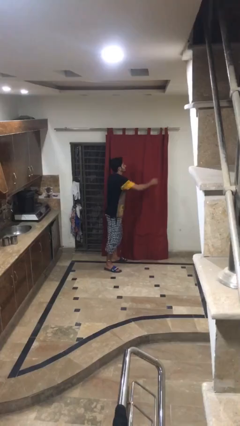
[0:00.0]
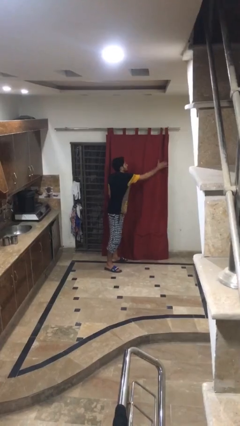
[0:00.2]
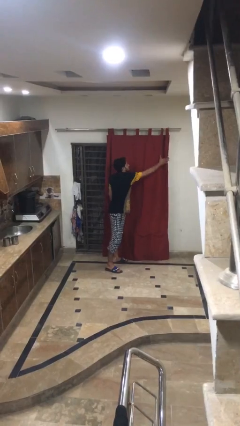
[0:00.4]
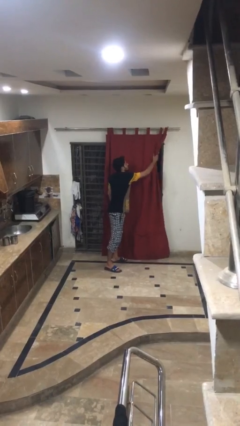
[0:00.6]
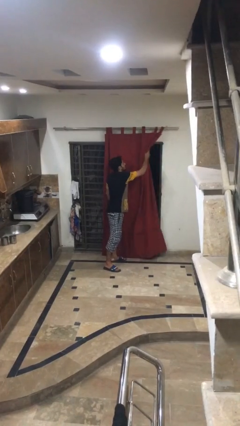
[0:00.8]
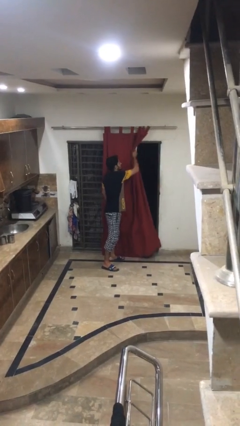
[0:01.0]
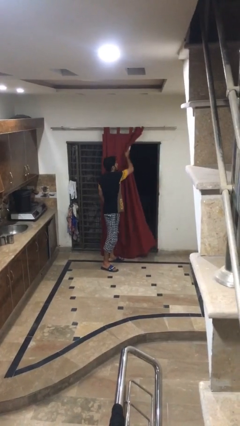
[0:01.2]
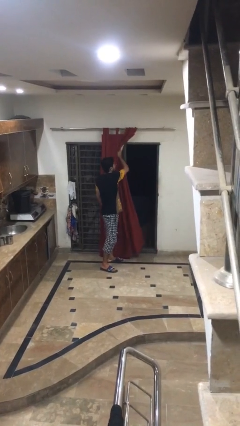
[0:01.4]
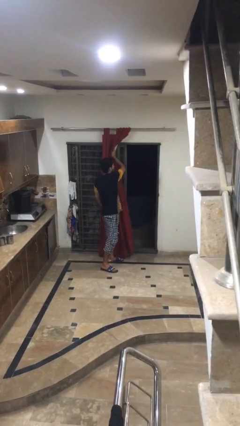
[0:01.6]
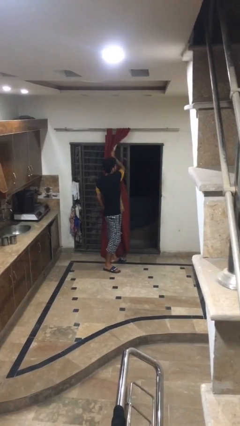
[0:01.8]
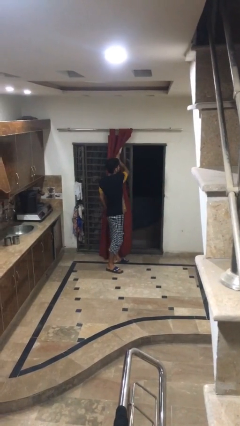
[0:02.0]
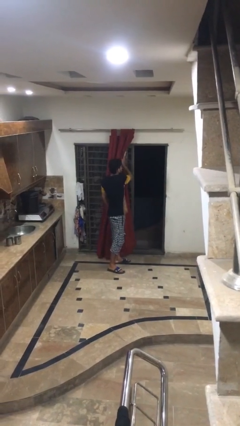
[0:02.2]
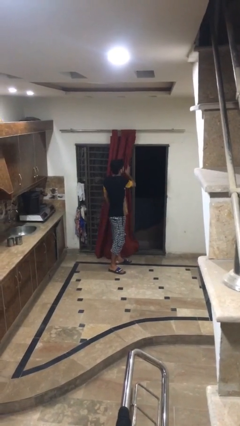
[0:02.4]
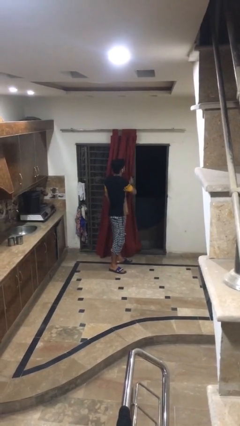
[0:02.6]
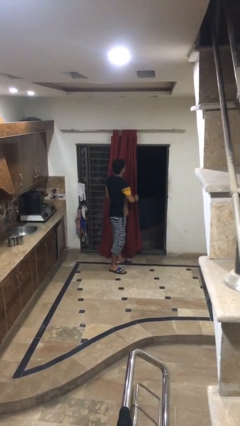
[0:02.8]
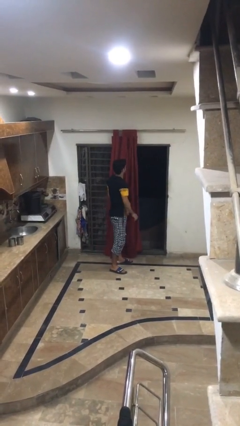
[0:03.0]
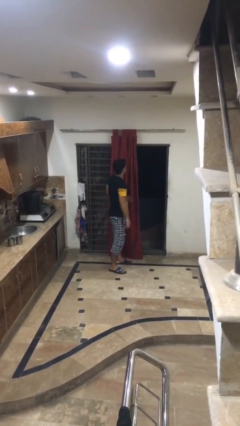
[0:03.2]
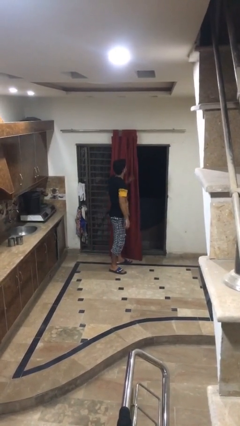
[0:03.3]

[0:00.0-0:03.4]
person opens curtains

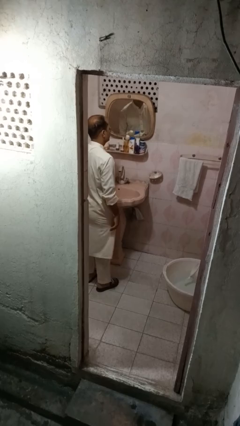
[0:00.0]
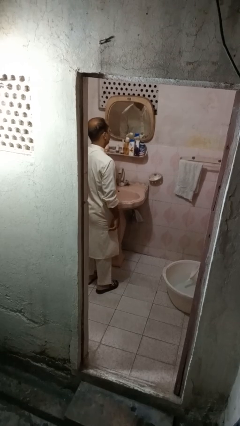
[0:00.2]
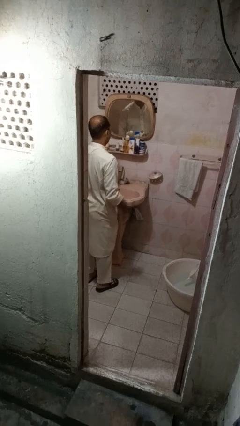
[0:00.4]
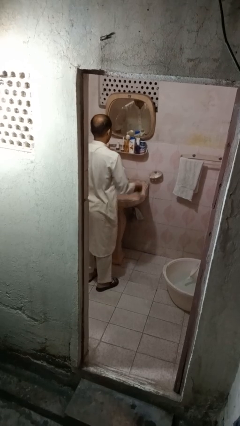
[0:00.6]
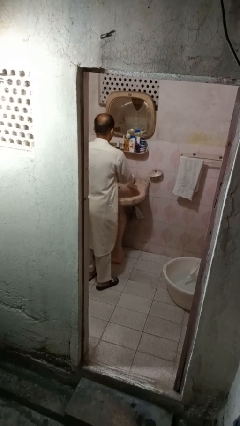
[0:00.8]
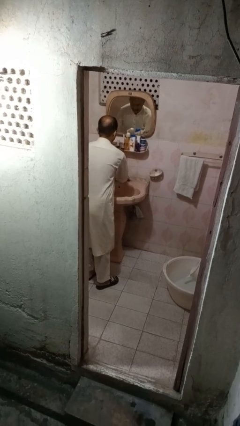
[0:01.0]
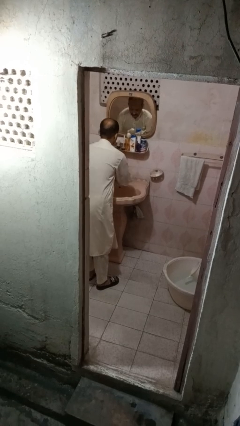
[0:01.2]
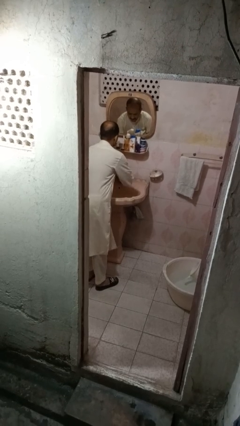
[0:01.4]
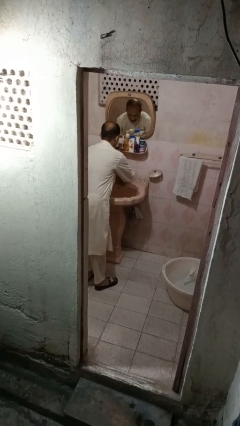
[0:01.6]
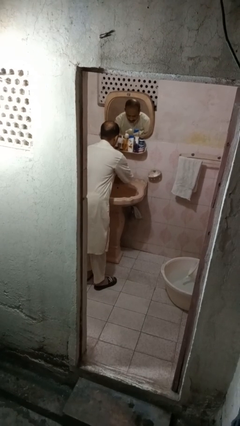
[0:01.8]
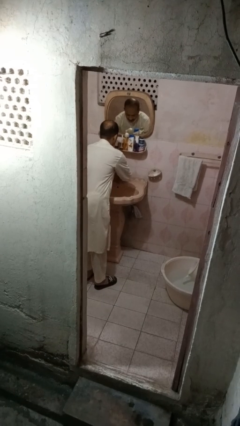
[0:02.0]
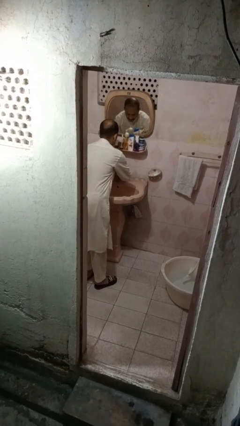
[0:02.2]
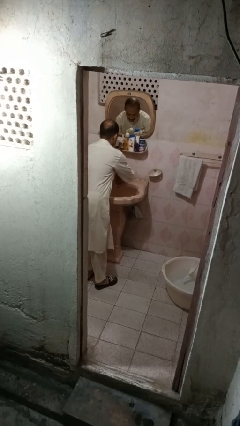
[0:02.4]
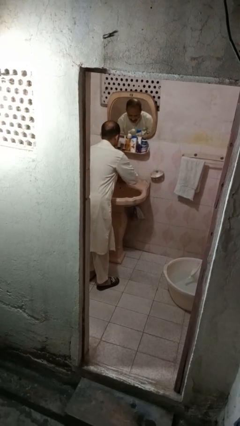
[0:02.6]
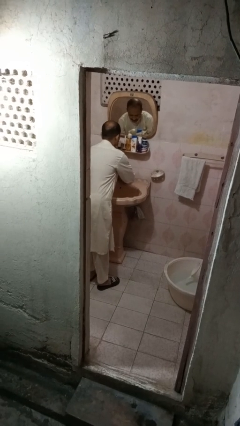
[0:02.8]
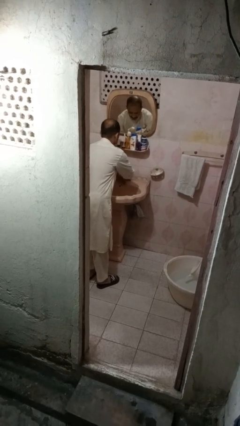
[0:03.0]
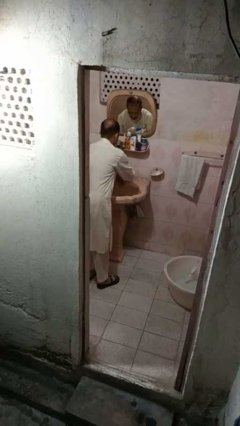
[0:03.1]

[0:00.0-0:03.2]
person washes hands

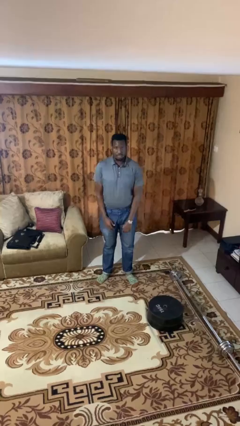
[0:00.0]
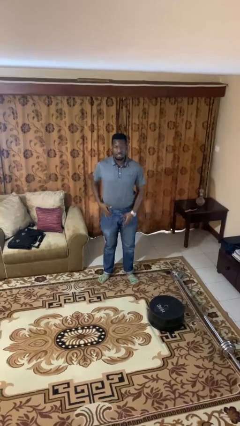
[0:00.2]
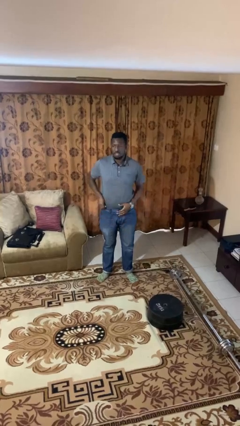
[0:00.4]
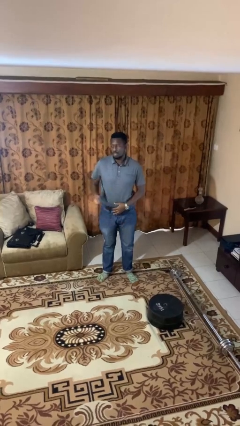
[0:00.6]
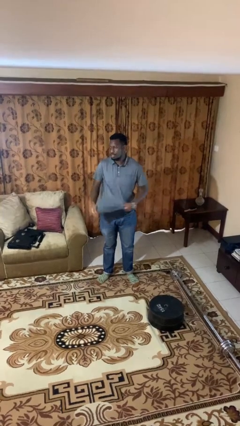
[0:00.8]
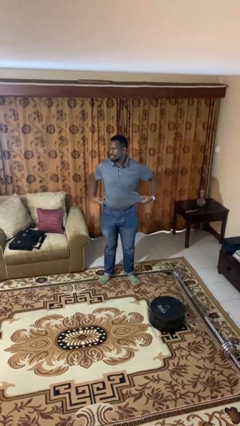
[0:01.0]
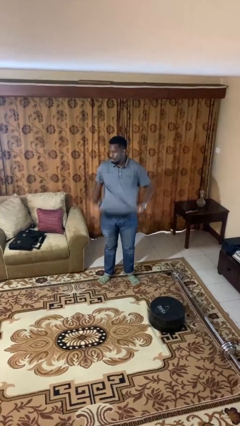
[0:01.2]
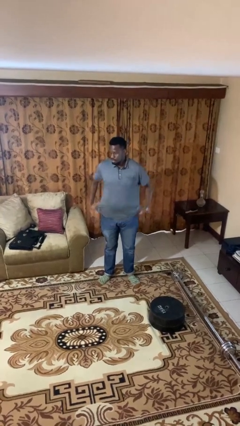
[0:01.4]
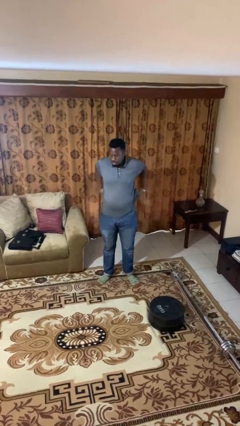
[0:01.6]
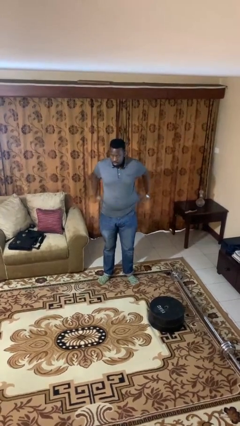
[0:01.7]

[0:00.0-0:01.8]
person untucks shirt

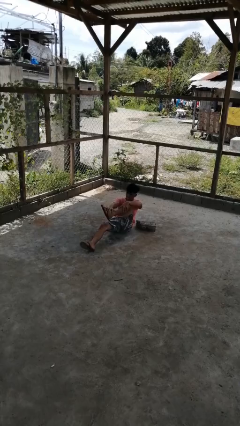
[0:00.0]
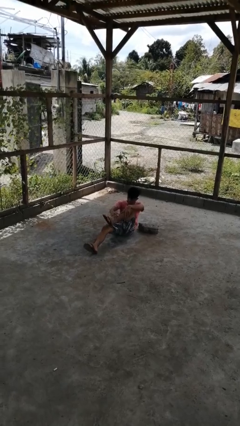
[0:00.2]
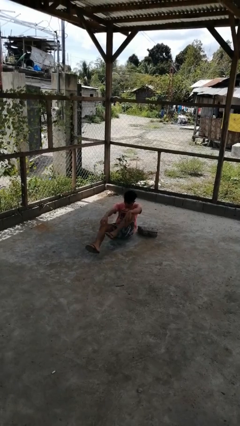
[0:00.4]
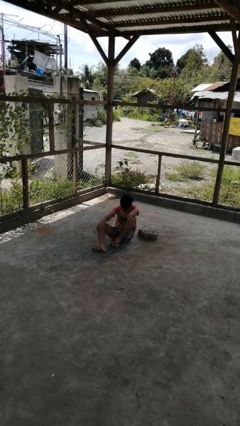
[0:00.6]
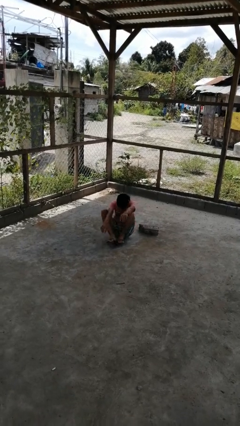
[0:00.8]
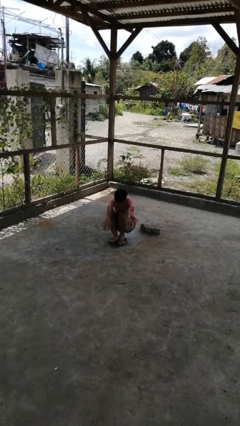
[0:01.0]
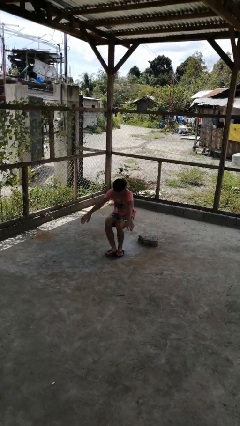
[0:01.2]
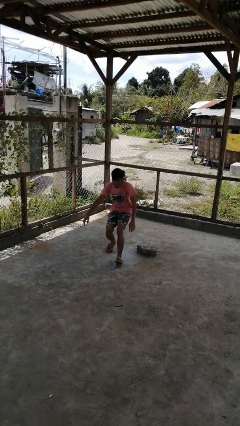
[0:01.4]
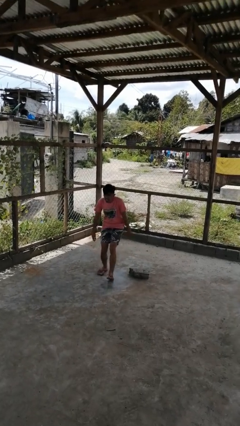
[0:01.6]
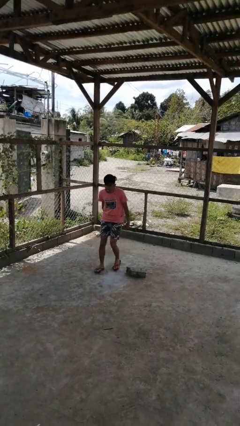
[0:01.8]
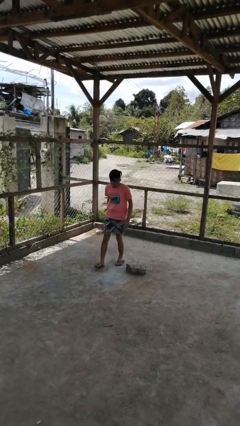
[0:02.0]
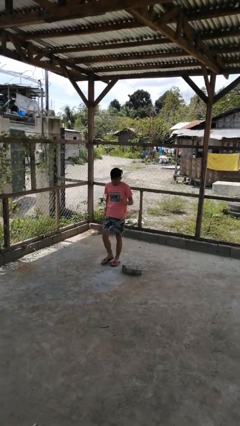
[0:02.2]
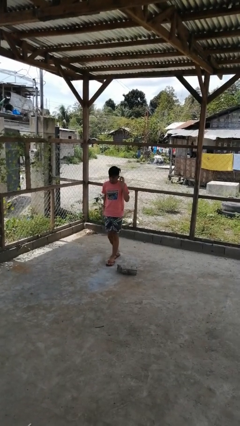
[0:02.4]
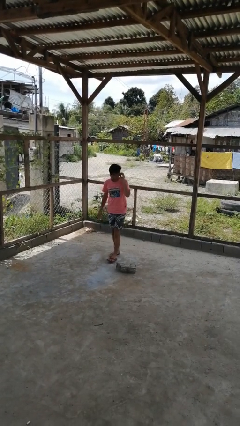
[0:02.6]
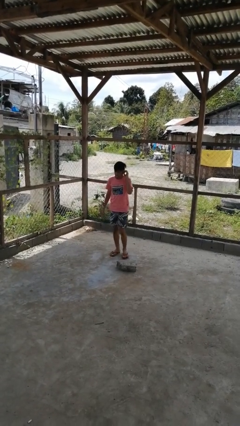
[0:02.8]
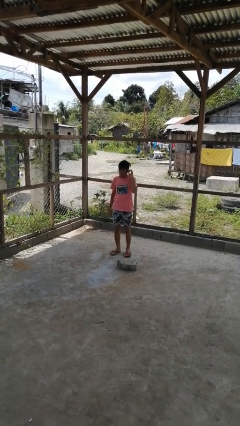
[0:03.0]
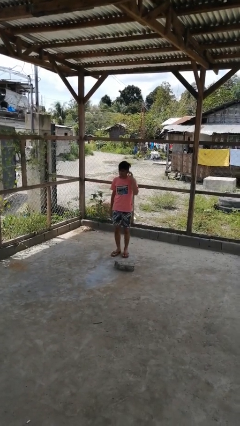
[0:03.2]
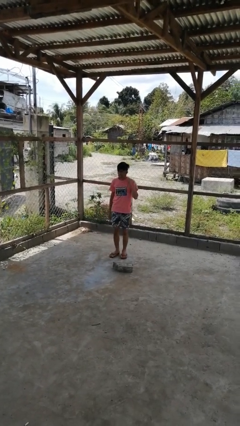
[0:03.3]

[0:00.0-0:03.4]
person stands up from floor

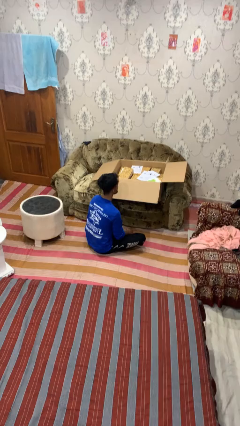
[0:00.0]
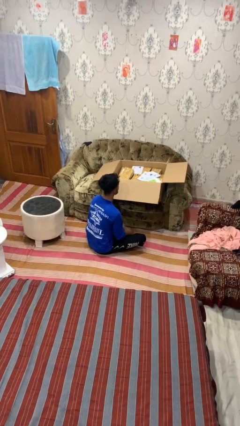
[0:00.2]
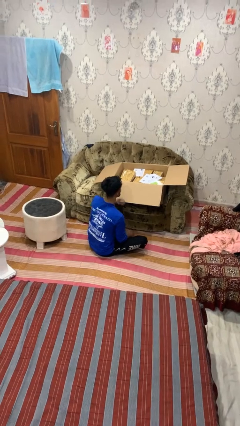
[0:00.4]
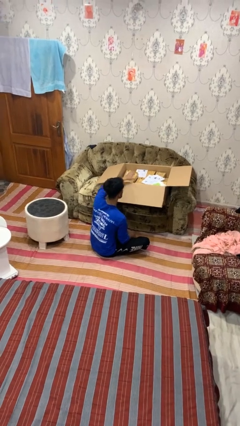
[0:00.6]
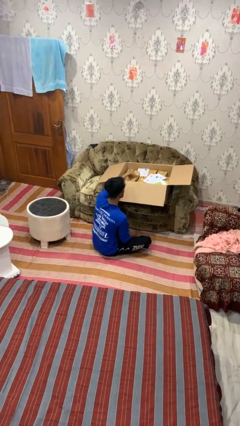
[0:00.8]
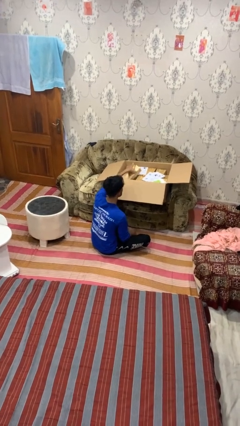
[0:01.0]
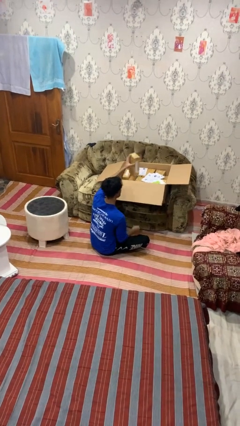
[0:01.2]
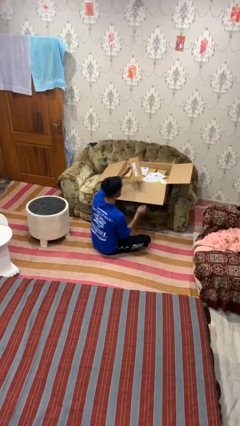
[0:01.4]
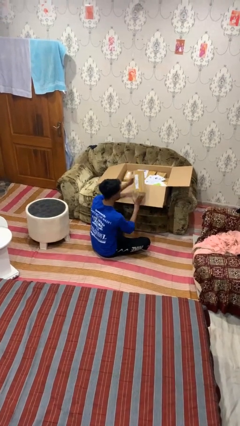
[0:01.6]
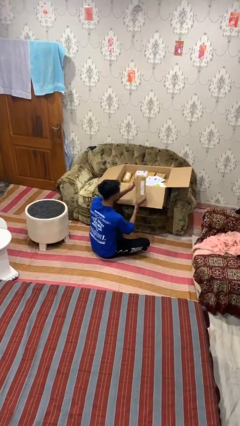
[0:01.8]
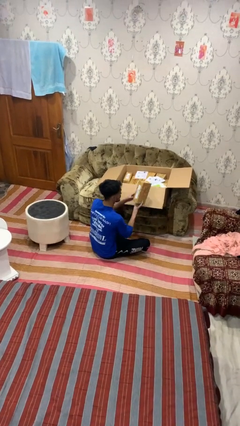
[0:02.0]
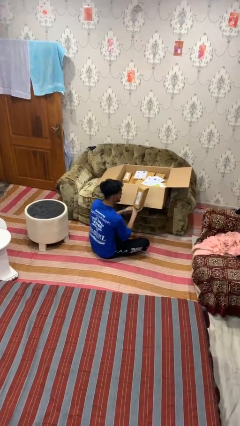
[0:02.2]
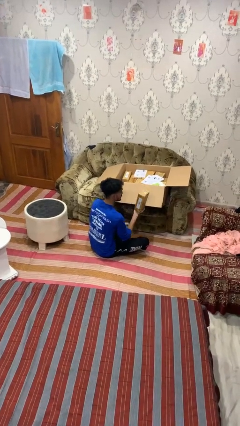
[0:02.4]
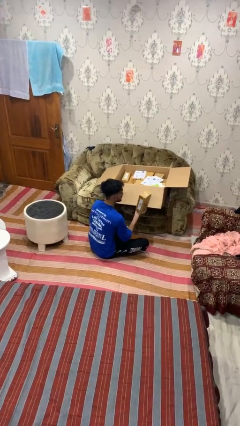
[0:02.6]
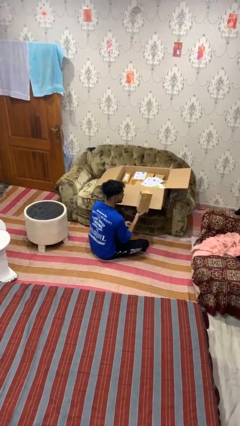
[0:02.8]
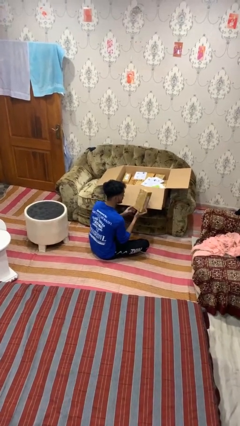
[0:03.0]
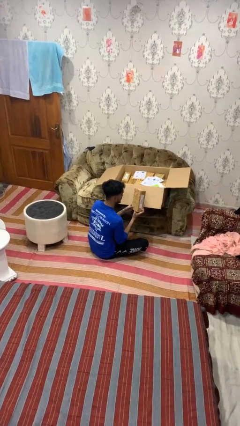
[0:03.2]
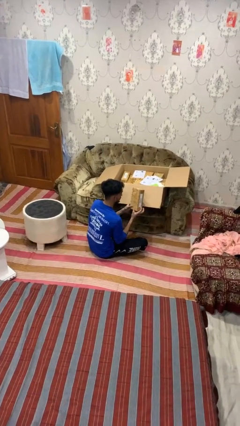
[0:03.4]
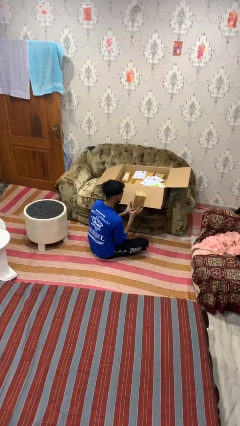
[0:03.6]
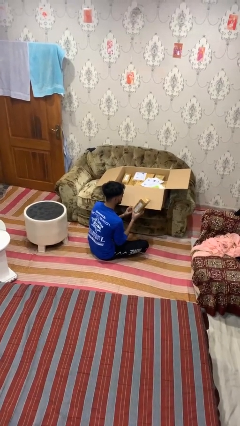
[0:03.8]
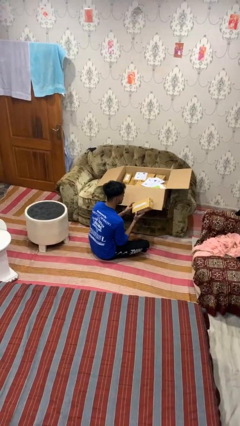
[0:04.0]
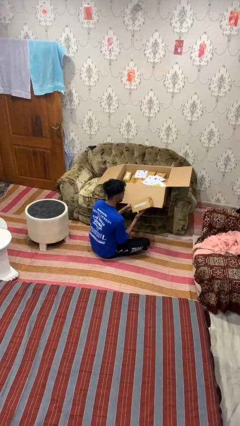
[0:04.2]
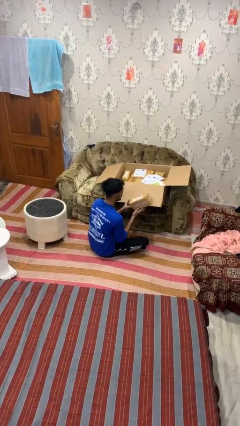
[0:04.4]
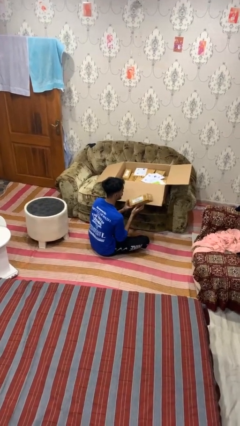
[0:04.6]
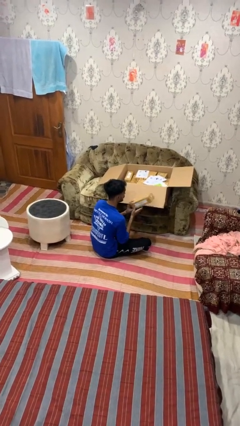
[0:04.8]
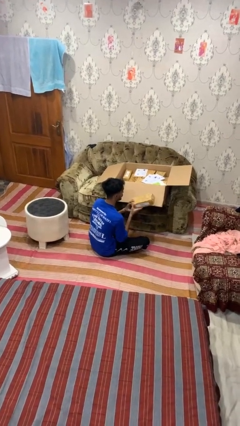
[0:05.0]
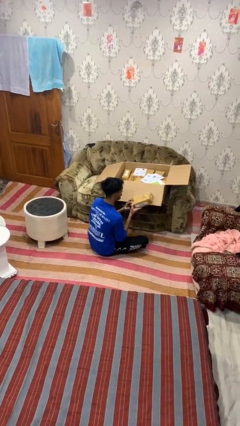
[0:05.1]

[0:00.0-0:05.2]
person takes object from box

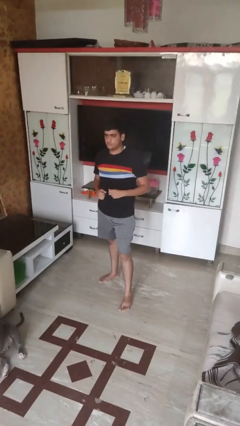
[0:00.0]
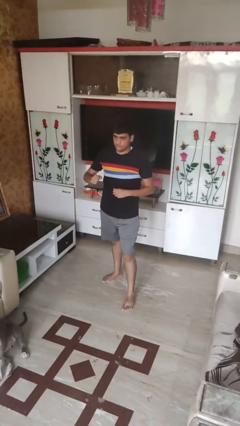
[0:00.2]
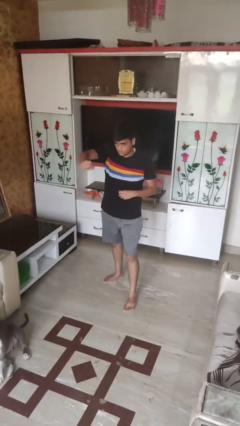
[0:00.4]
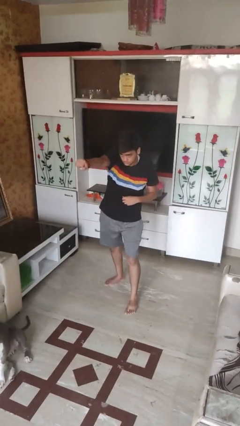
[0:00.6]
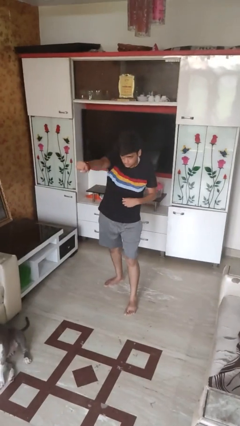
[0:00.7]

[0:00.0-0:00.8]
person punches
